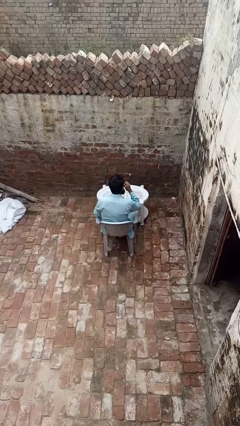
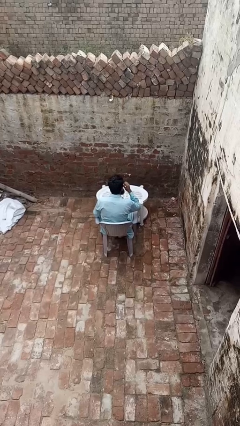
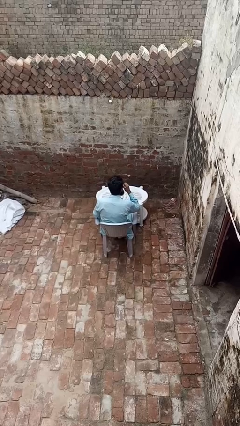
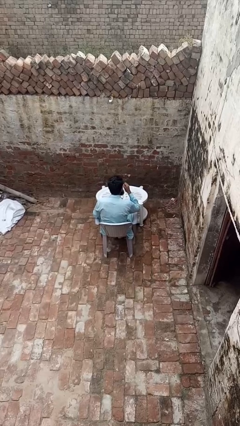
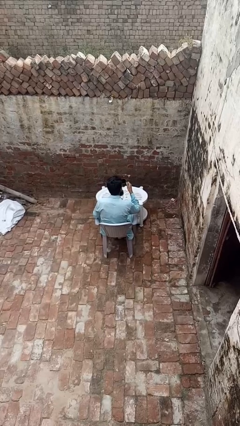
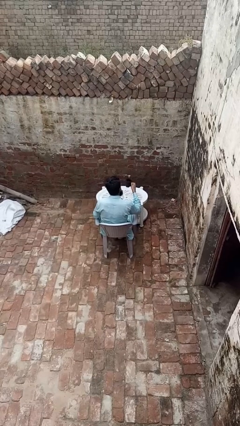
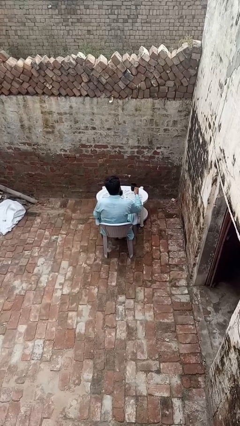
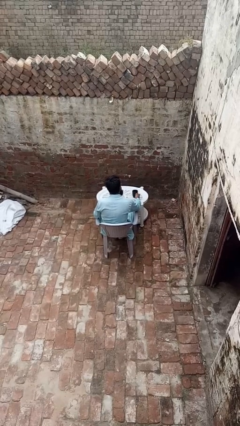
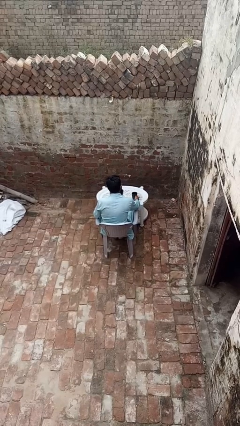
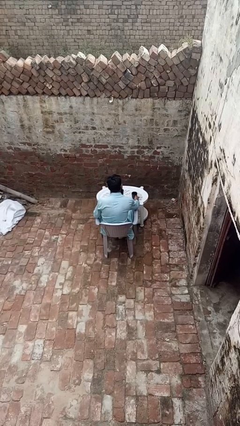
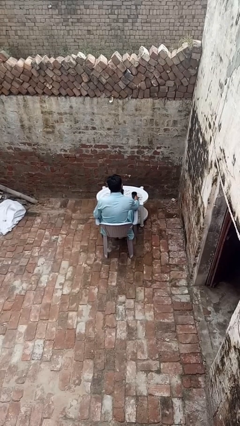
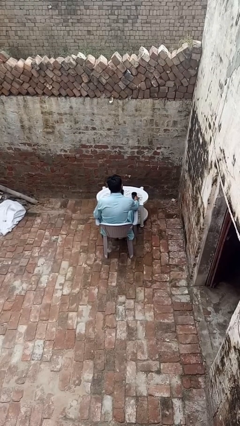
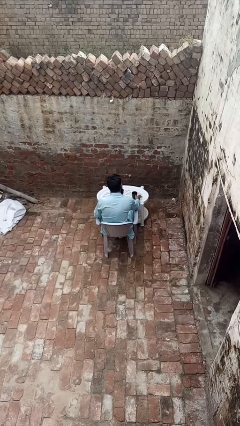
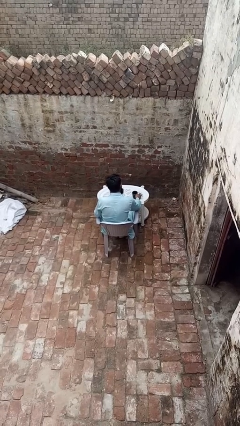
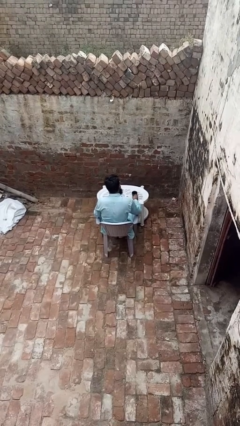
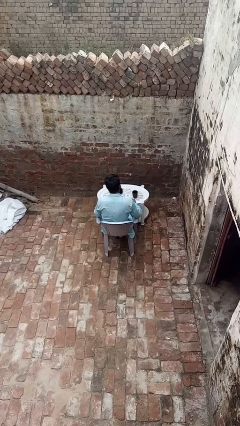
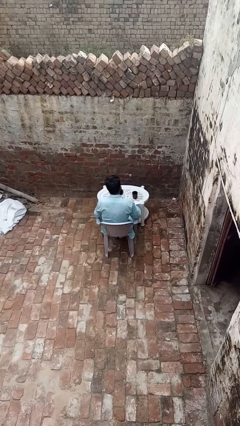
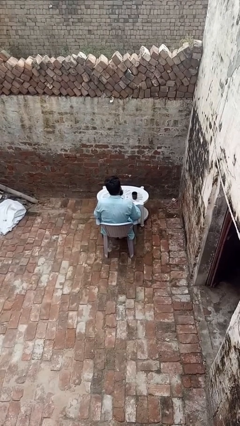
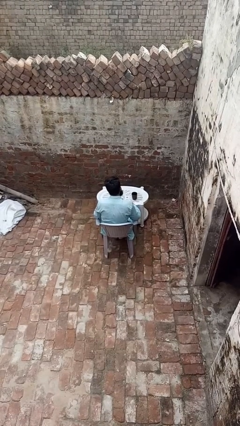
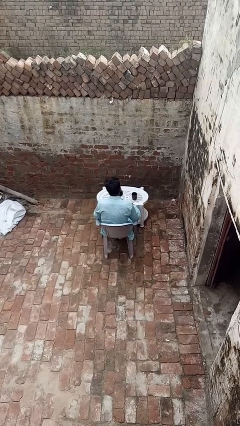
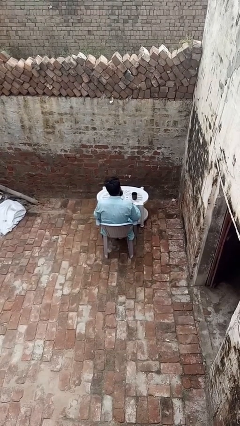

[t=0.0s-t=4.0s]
person puts down object on table

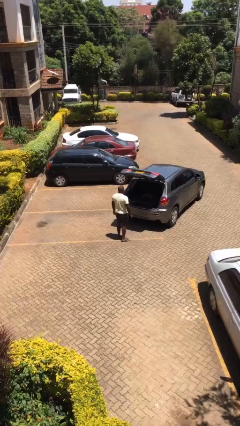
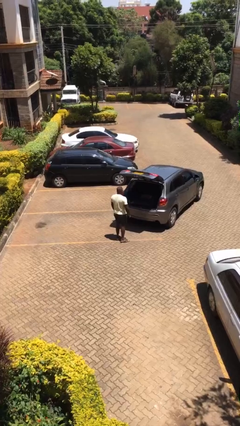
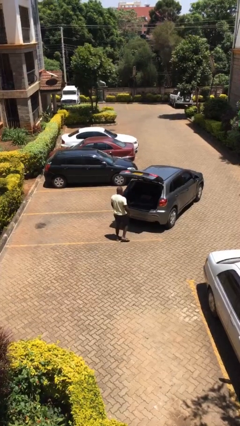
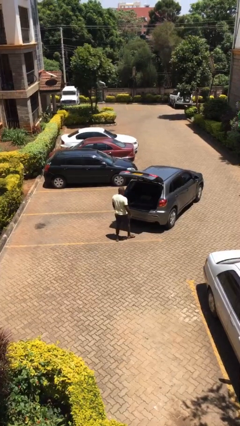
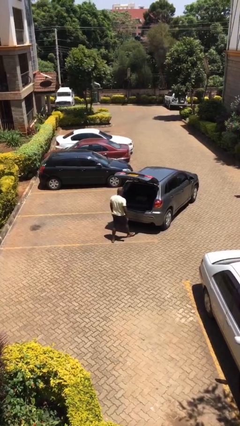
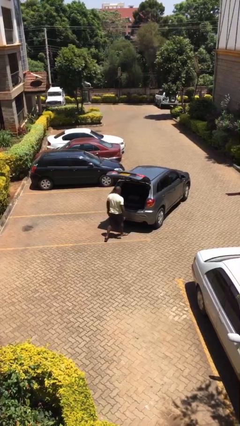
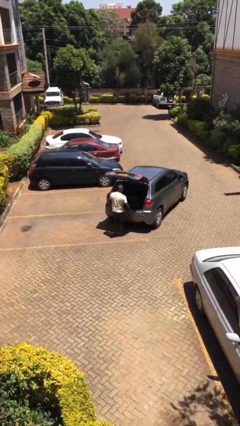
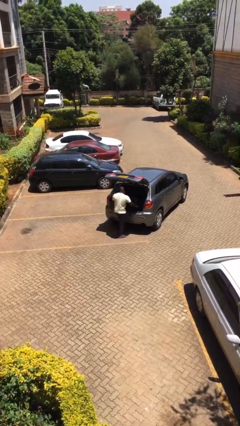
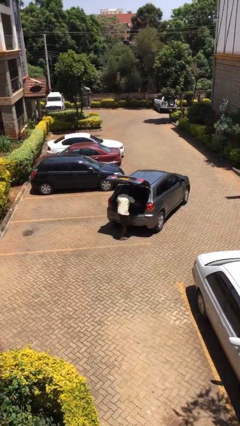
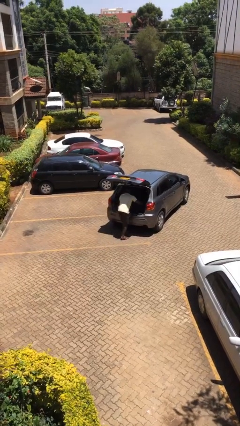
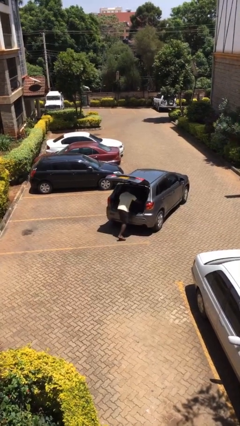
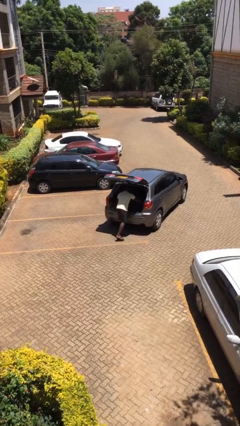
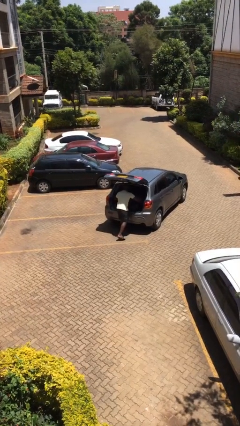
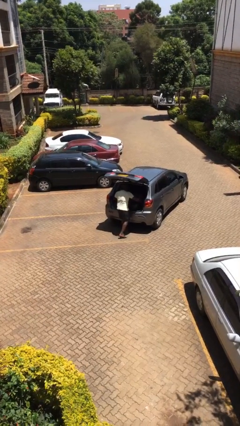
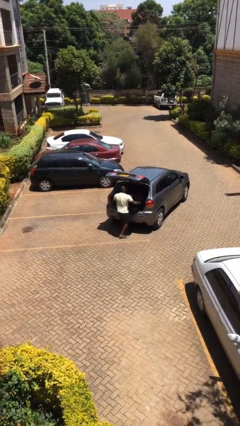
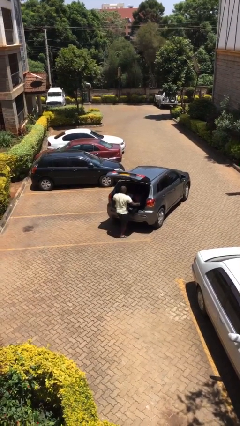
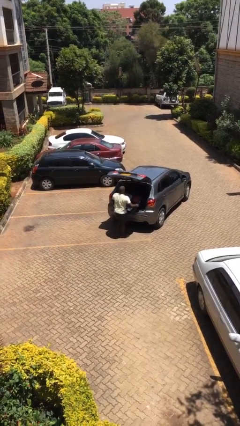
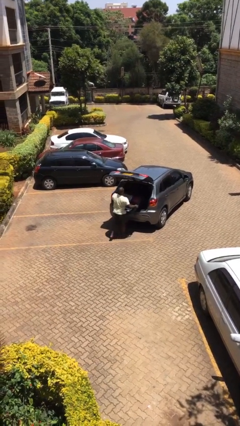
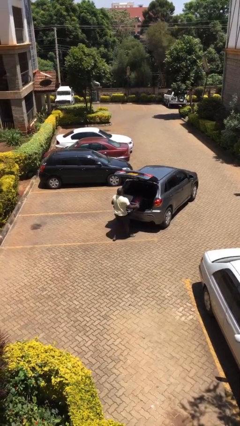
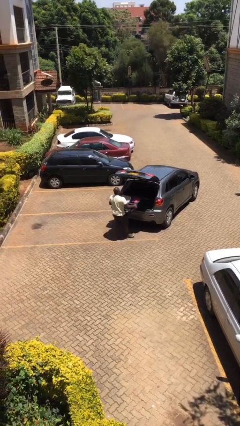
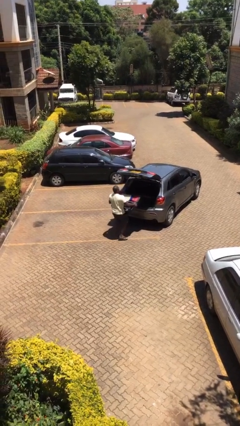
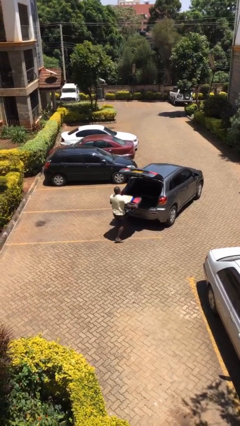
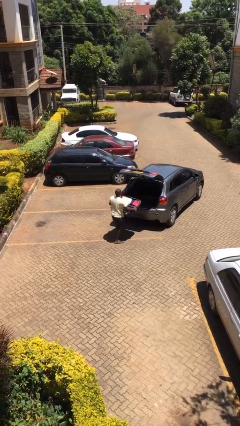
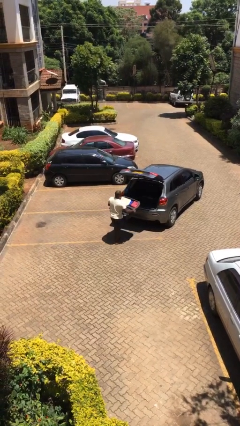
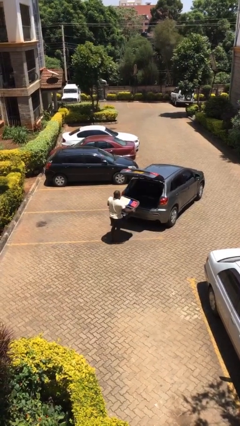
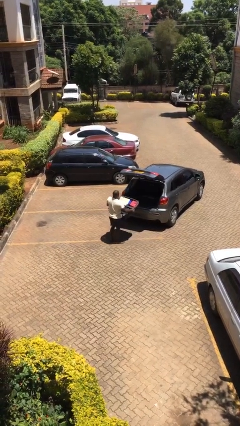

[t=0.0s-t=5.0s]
person unloads car

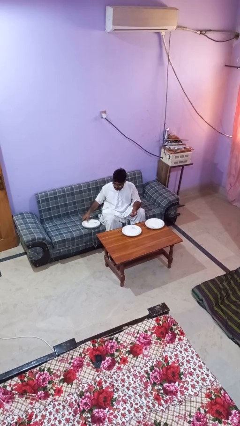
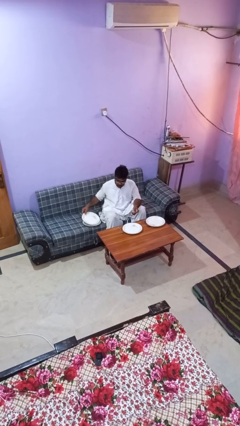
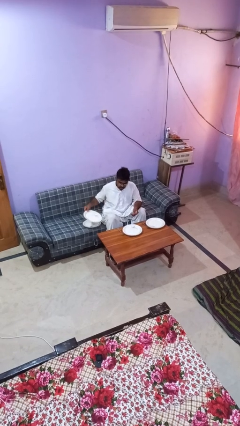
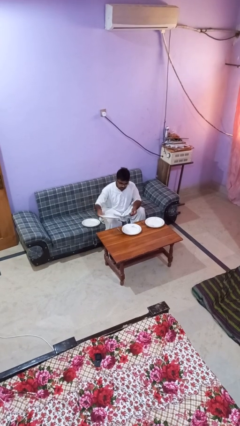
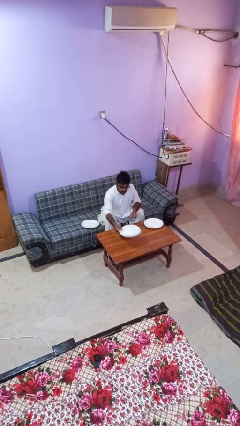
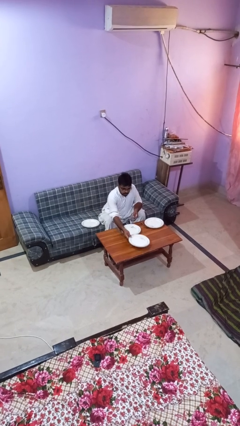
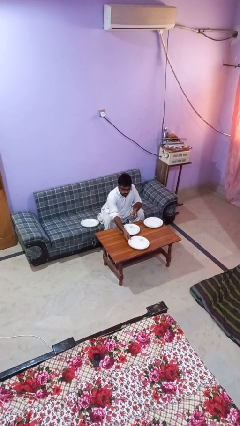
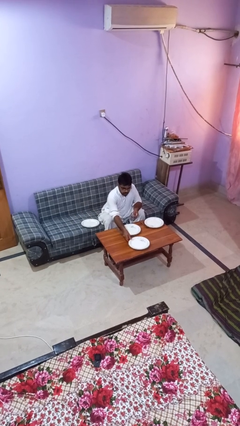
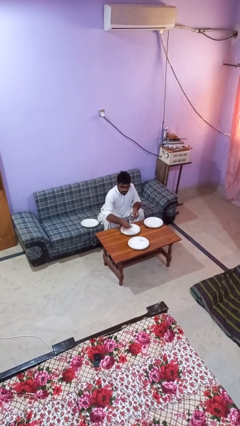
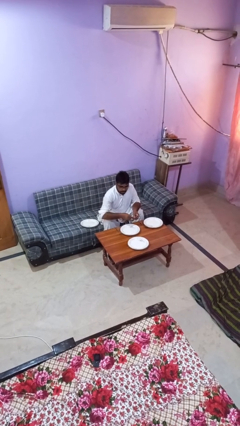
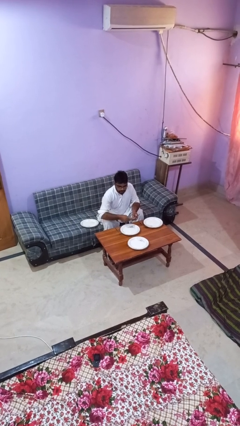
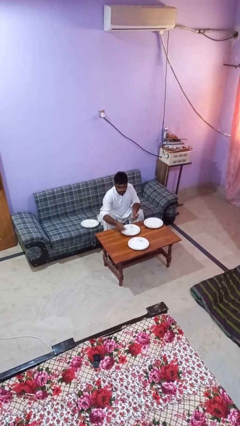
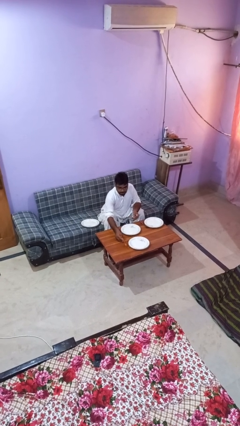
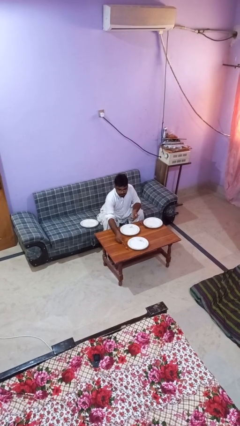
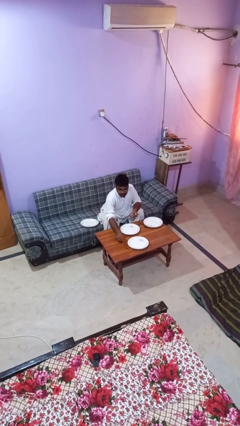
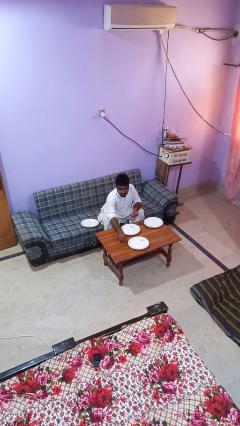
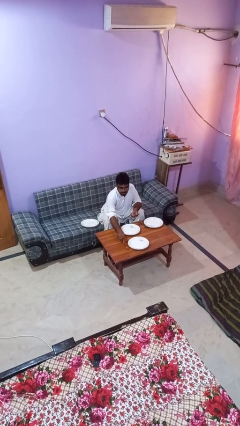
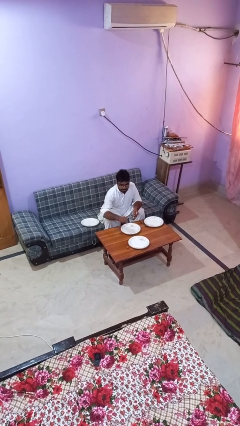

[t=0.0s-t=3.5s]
person sets table

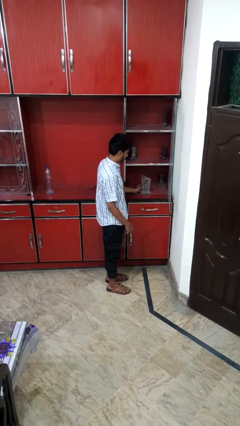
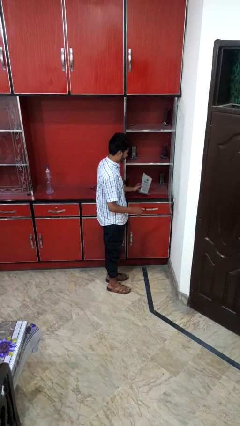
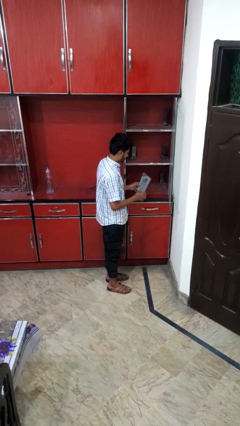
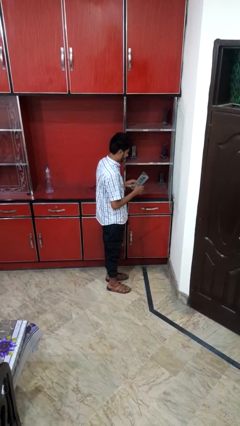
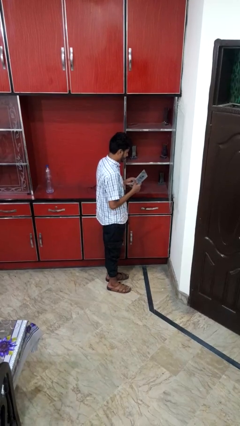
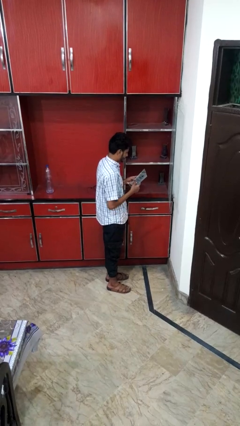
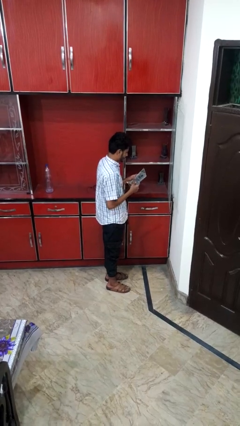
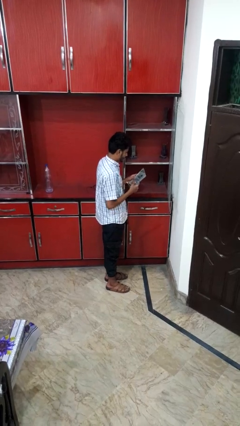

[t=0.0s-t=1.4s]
person picks up object from cabinet

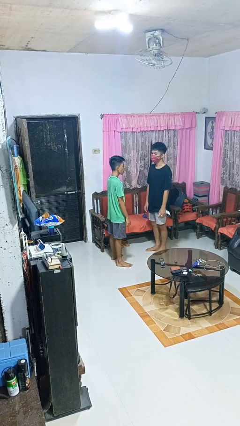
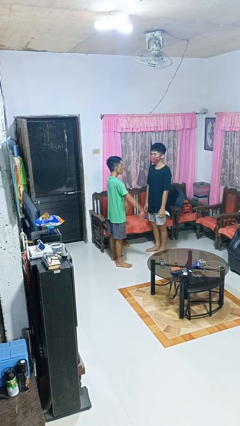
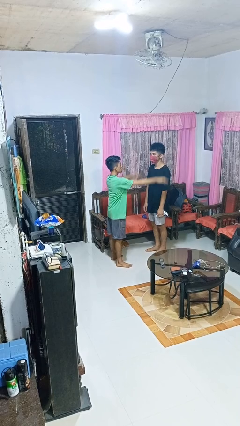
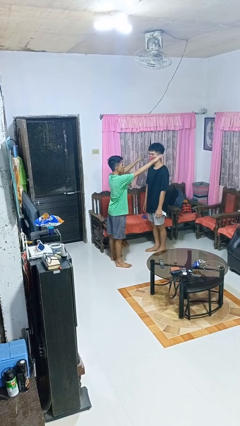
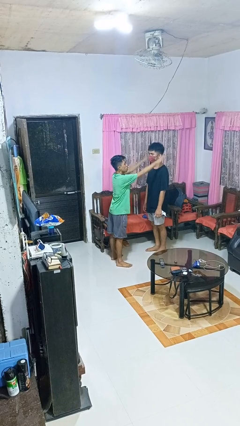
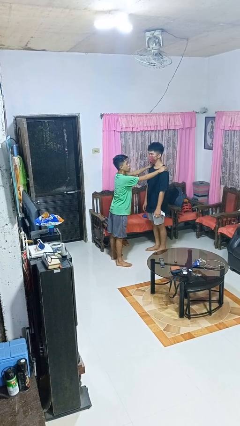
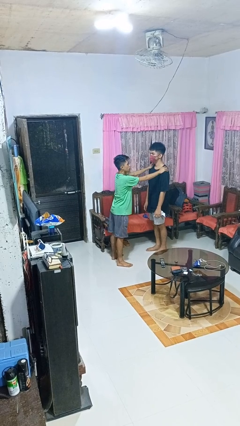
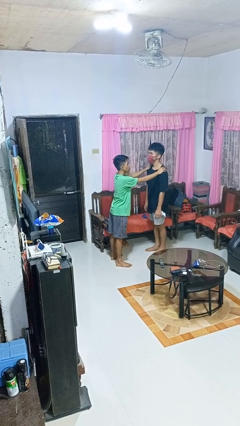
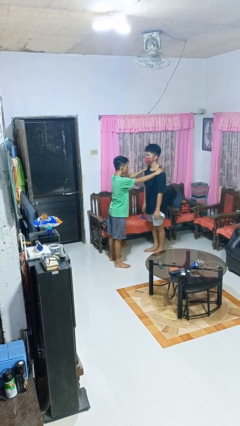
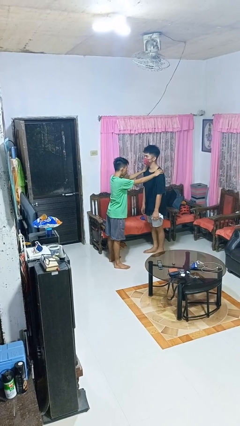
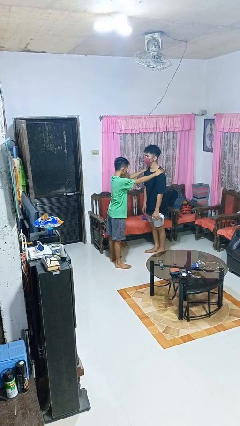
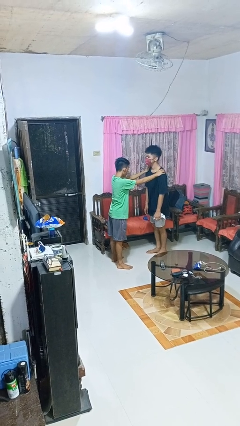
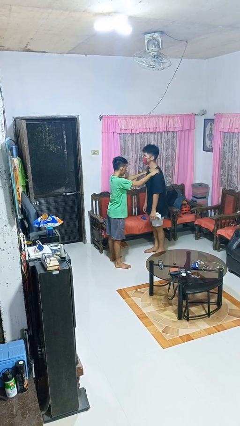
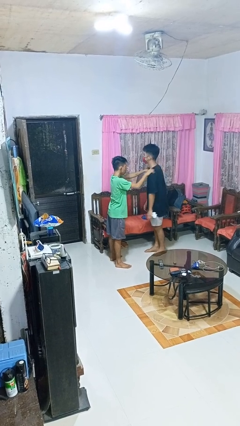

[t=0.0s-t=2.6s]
person grabs person by shoulder

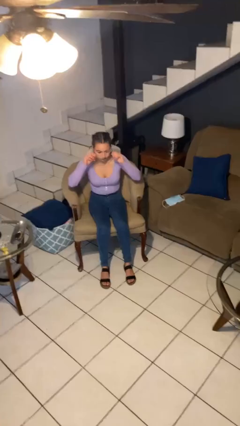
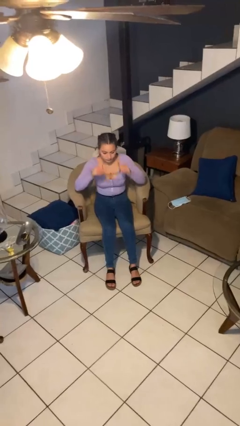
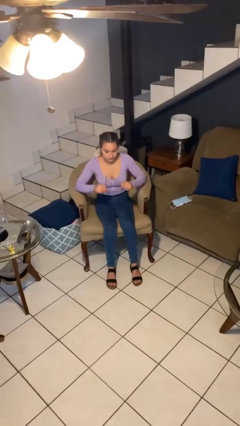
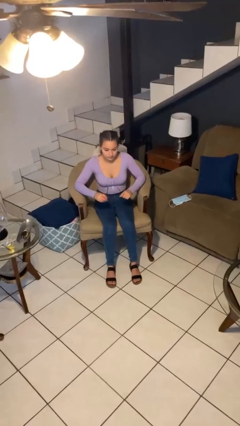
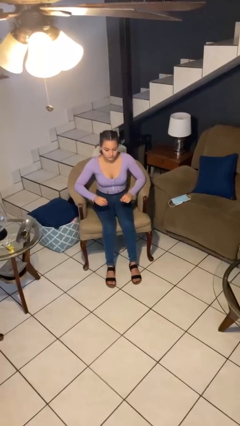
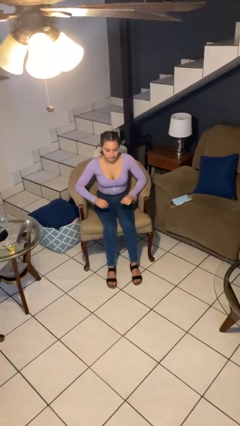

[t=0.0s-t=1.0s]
person takes off glasses

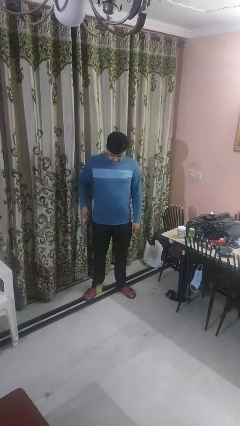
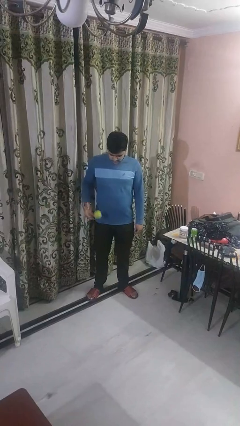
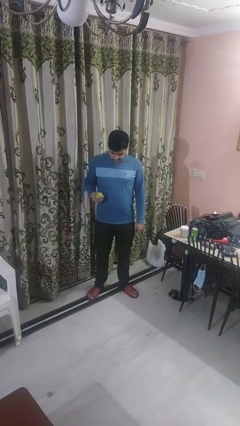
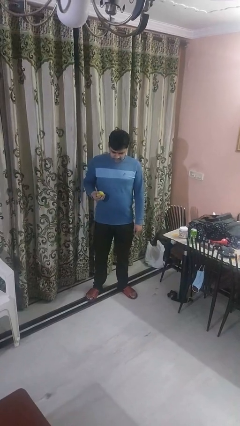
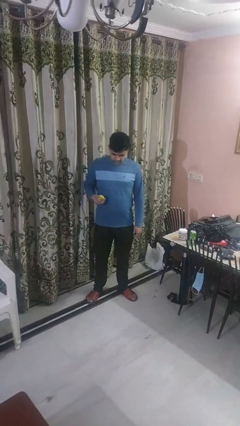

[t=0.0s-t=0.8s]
person bounces ball on floor
